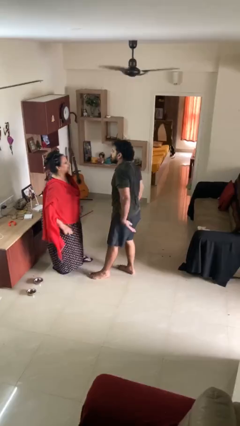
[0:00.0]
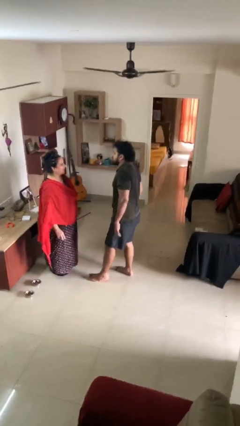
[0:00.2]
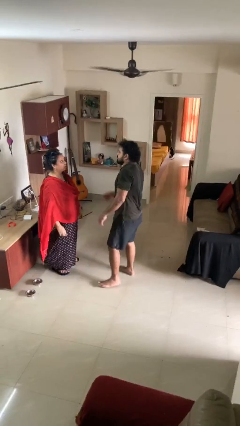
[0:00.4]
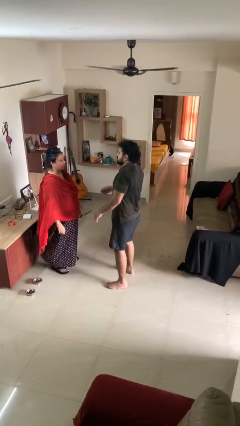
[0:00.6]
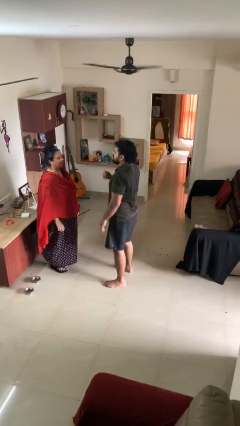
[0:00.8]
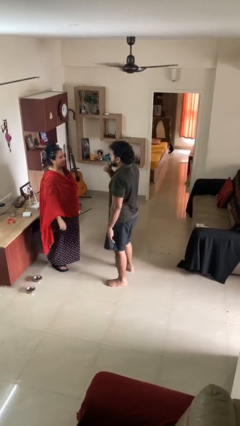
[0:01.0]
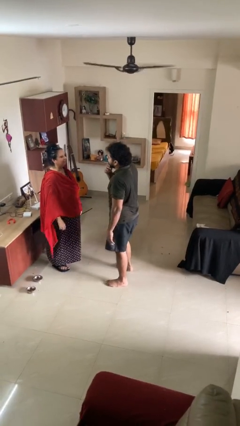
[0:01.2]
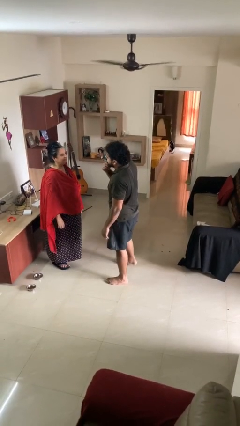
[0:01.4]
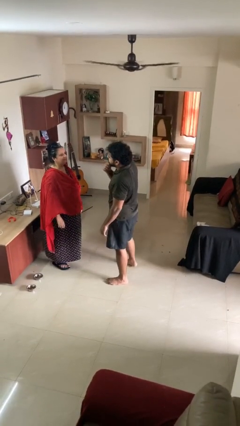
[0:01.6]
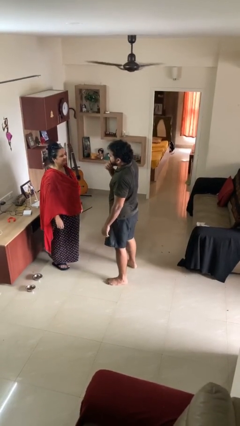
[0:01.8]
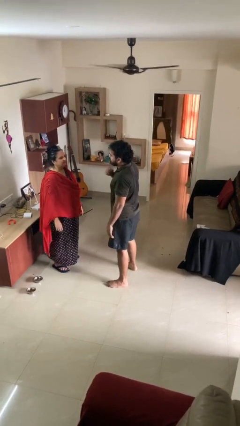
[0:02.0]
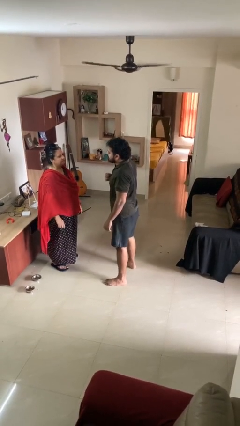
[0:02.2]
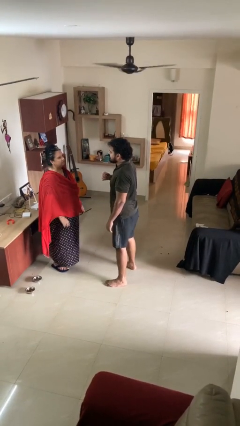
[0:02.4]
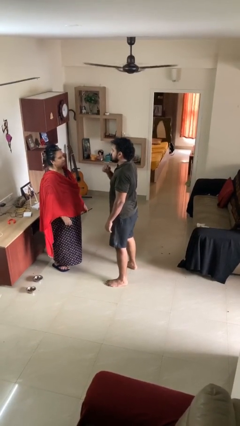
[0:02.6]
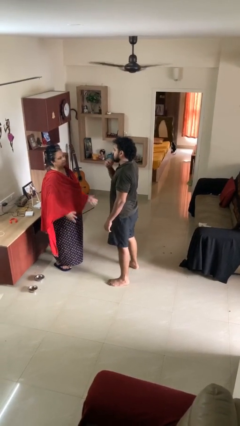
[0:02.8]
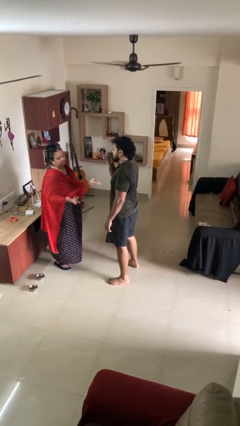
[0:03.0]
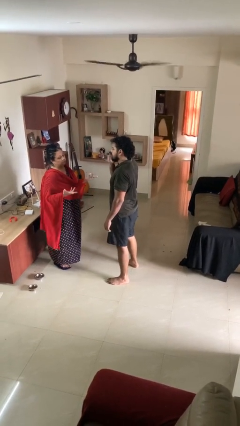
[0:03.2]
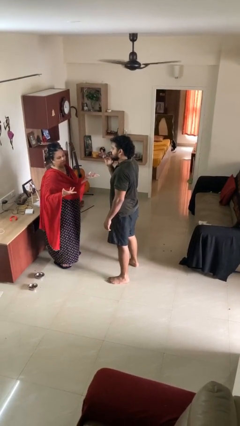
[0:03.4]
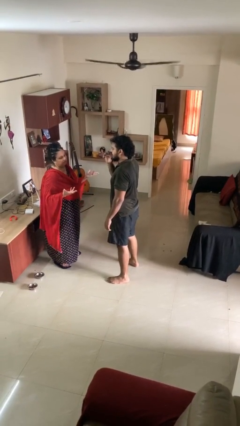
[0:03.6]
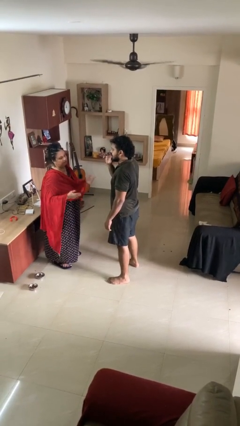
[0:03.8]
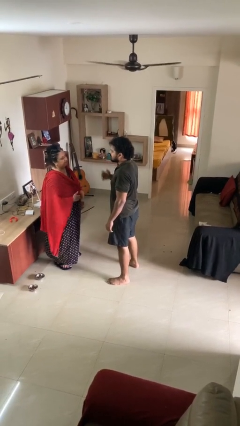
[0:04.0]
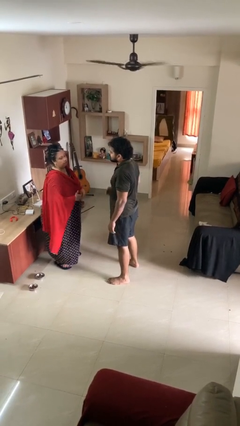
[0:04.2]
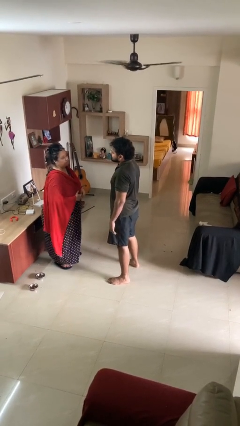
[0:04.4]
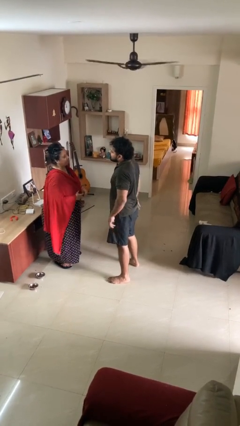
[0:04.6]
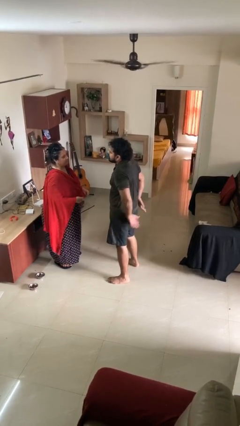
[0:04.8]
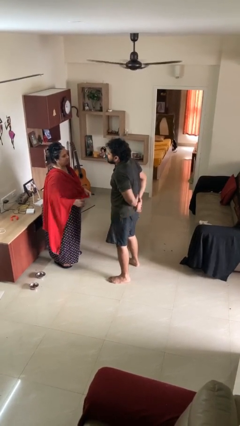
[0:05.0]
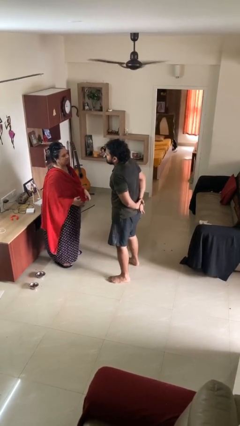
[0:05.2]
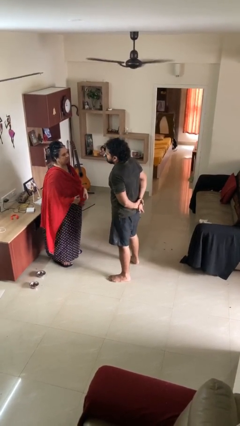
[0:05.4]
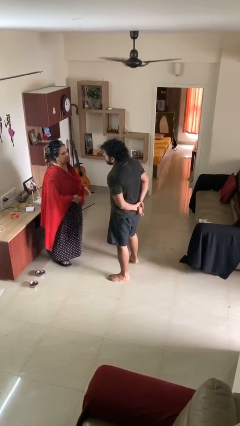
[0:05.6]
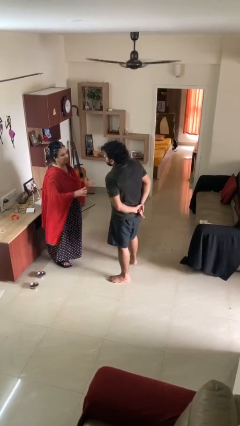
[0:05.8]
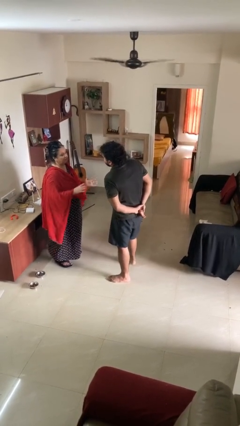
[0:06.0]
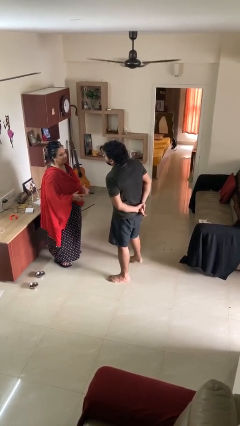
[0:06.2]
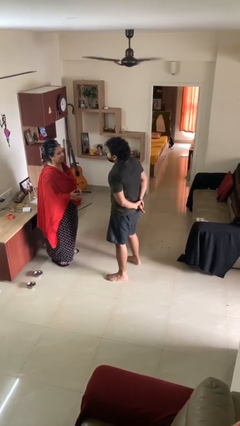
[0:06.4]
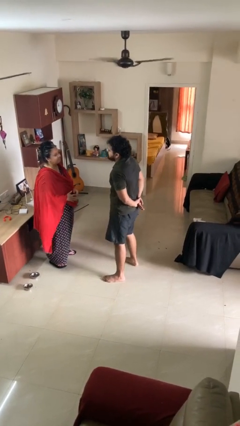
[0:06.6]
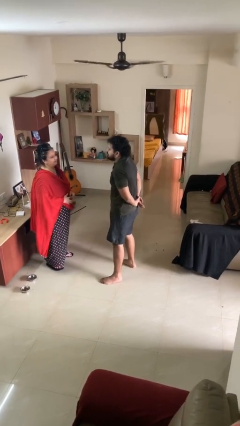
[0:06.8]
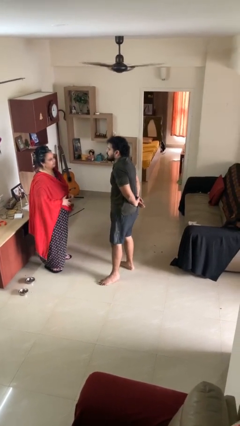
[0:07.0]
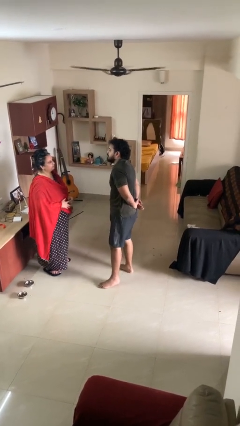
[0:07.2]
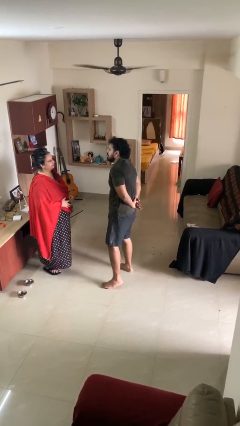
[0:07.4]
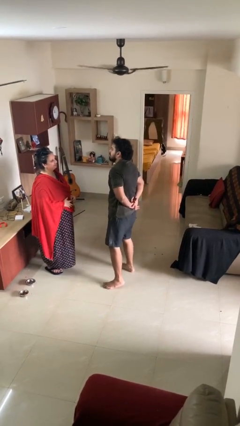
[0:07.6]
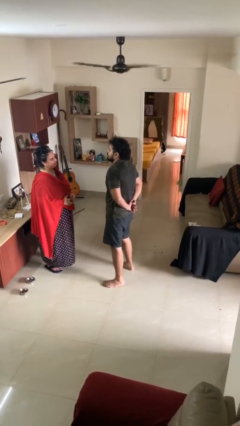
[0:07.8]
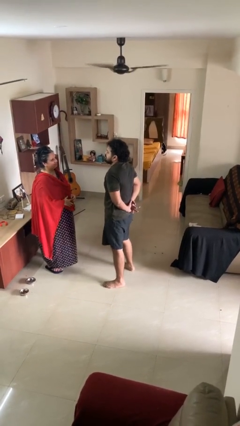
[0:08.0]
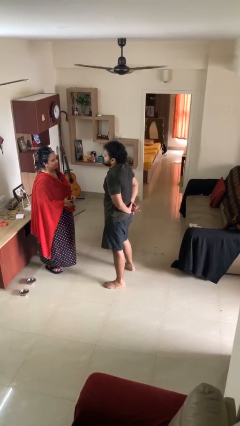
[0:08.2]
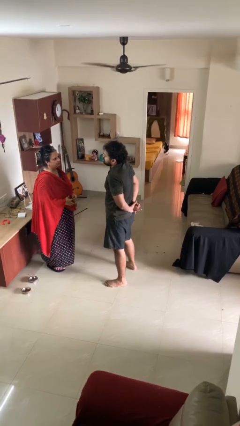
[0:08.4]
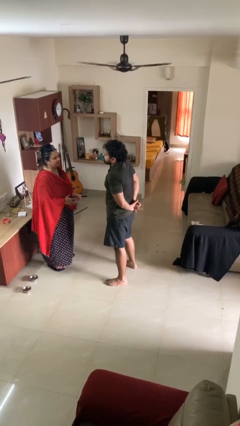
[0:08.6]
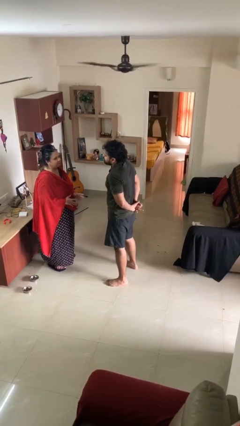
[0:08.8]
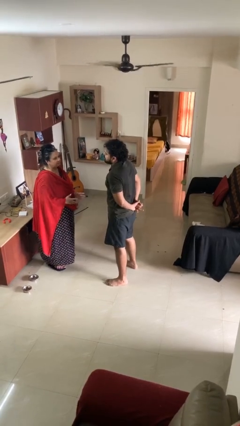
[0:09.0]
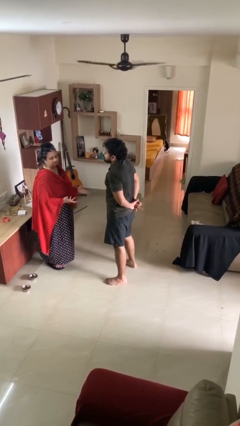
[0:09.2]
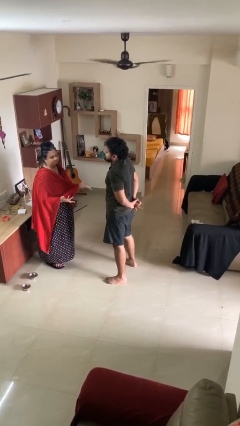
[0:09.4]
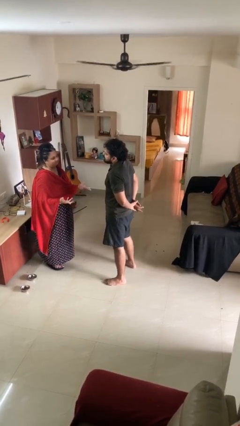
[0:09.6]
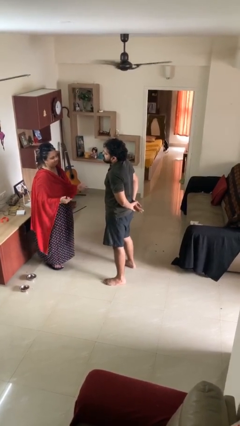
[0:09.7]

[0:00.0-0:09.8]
person talks to person

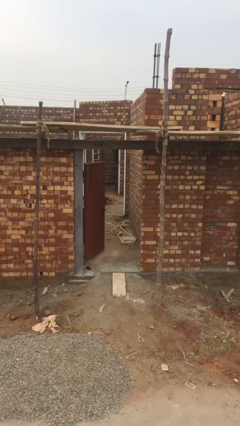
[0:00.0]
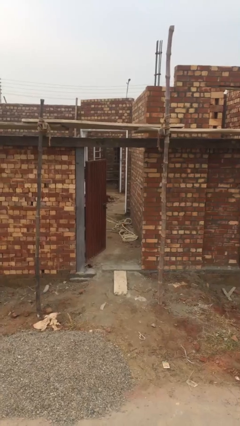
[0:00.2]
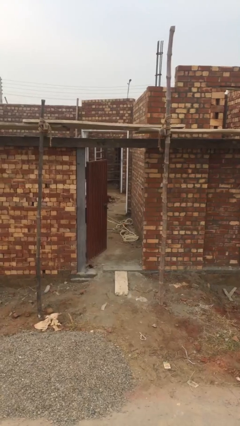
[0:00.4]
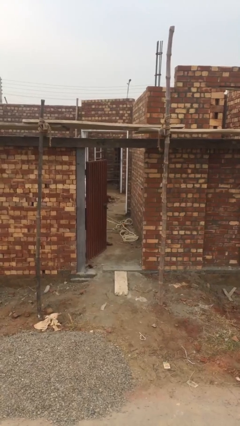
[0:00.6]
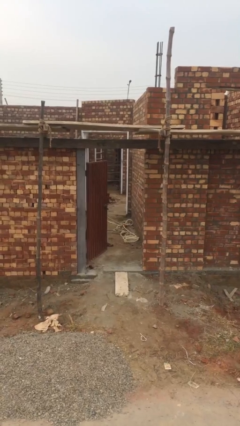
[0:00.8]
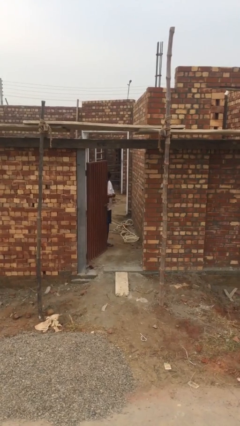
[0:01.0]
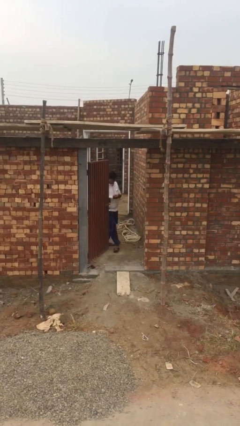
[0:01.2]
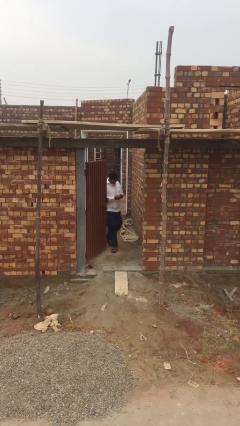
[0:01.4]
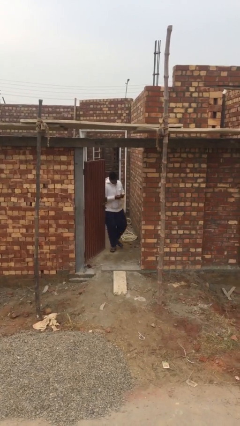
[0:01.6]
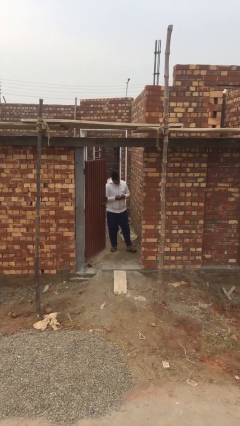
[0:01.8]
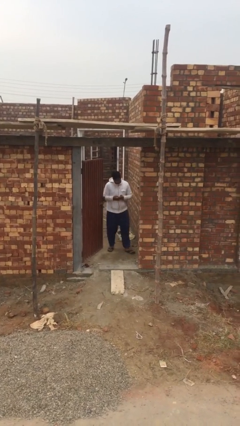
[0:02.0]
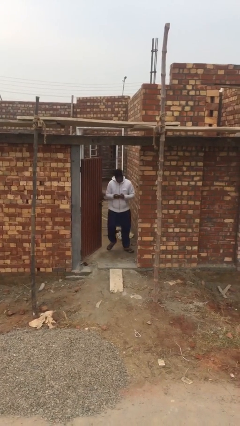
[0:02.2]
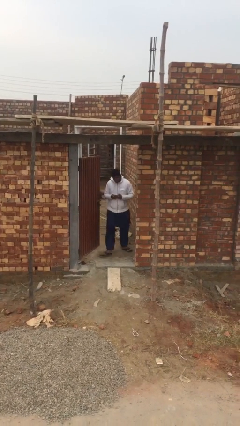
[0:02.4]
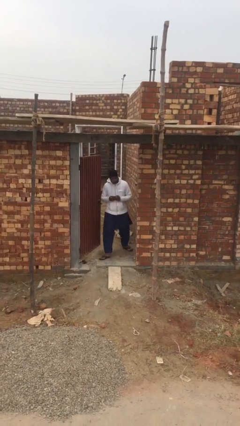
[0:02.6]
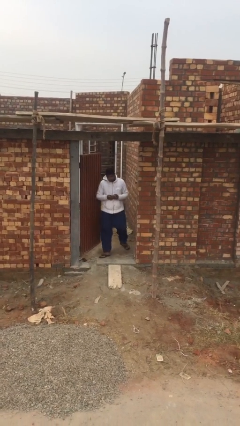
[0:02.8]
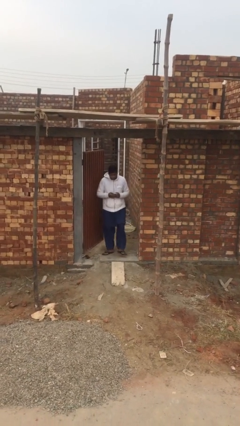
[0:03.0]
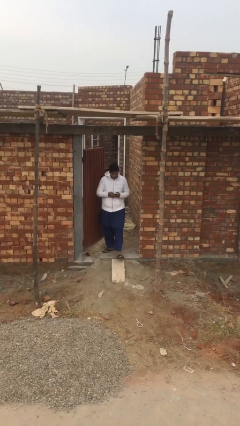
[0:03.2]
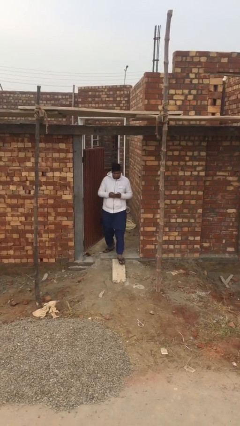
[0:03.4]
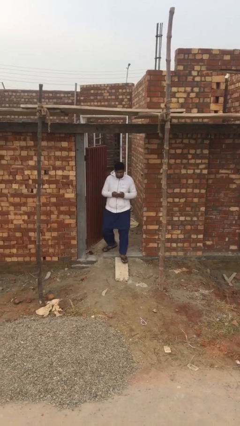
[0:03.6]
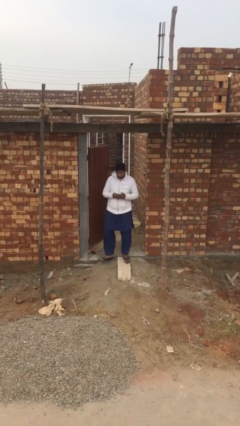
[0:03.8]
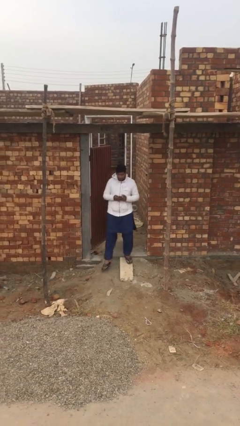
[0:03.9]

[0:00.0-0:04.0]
person enters scene through structure

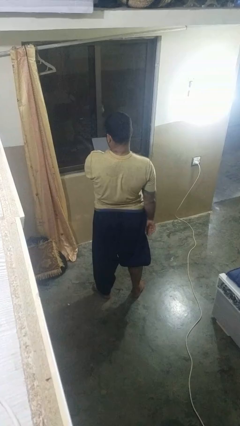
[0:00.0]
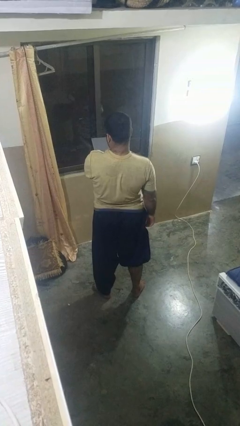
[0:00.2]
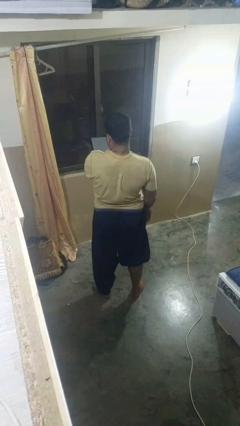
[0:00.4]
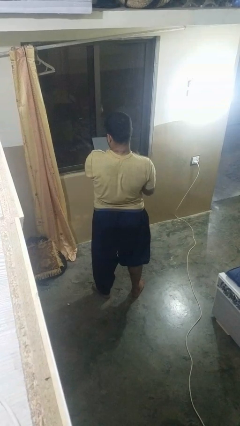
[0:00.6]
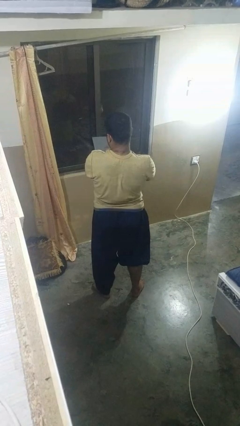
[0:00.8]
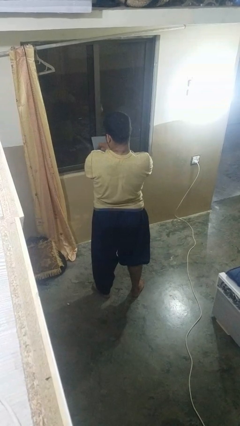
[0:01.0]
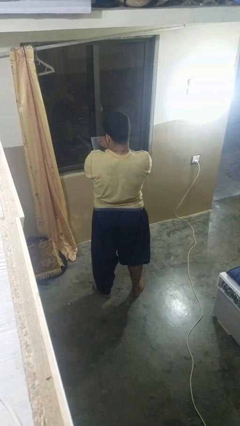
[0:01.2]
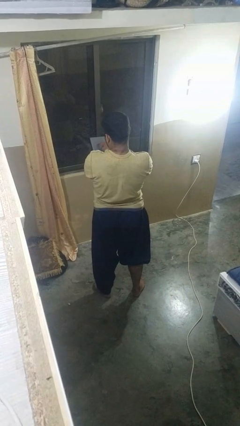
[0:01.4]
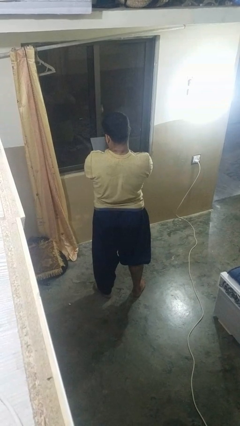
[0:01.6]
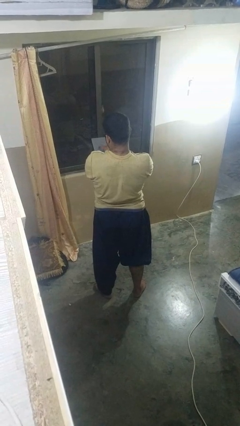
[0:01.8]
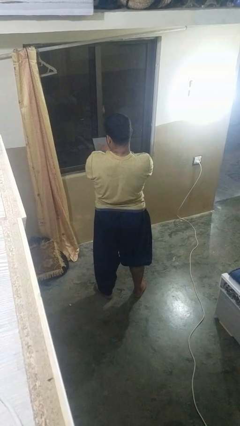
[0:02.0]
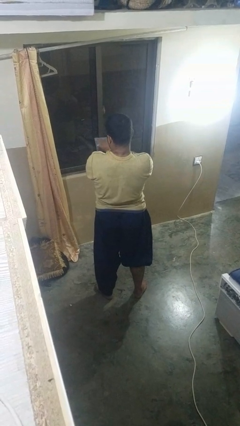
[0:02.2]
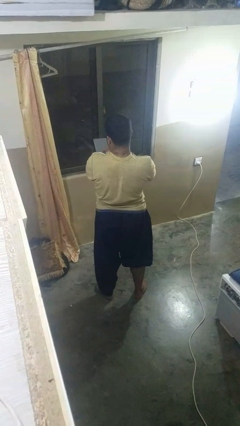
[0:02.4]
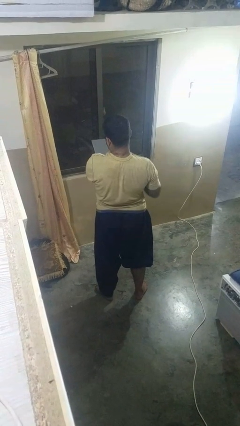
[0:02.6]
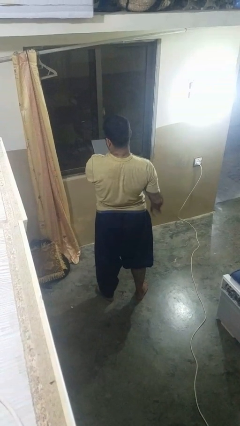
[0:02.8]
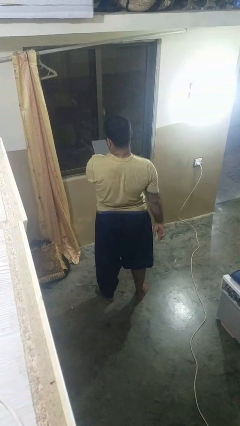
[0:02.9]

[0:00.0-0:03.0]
person interacts with tablet

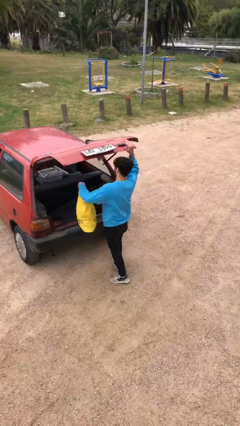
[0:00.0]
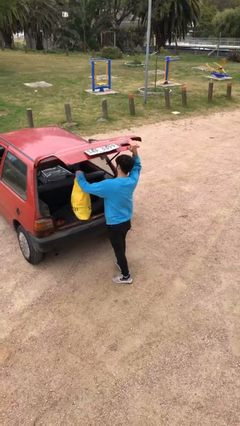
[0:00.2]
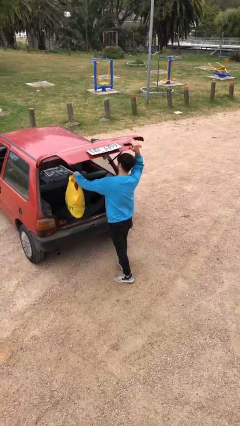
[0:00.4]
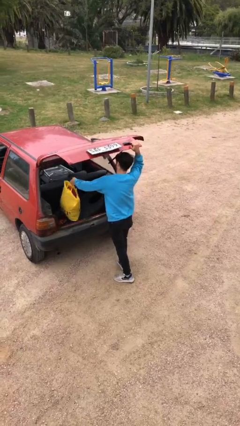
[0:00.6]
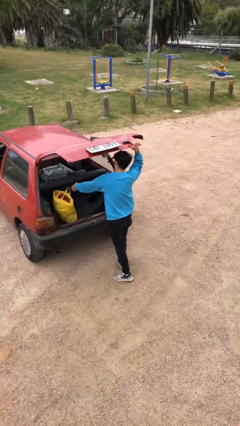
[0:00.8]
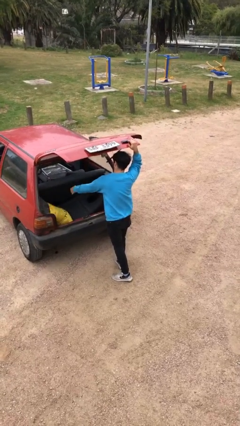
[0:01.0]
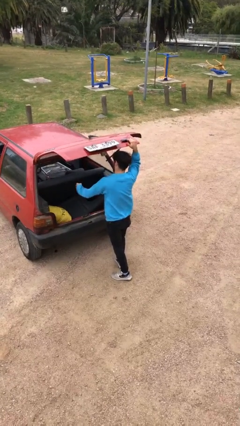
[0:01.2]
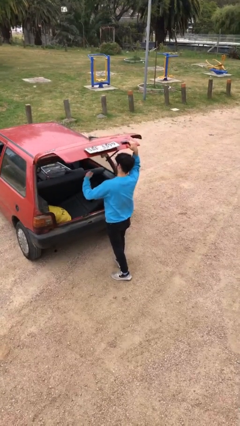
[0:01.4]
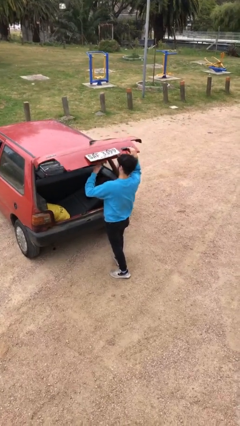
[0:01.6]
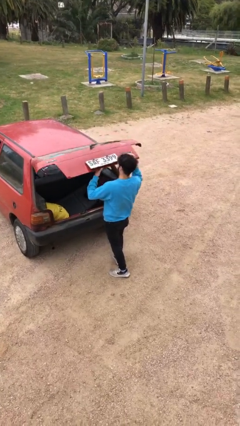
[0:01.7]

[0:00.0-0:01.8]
person loads car
